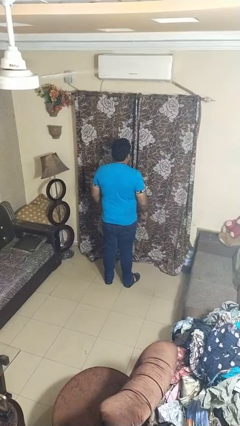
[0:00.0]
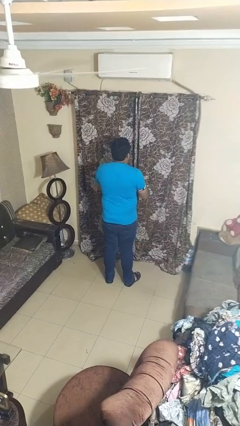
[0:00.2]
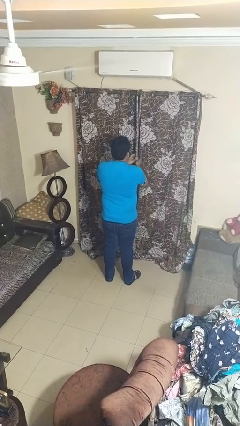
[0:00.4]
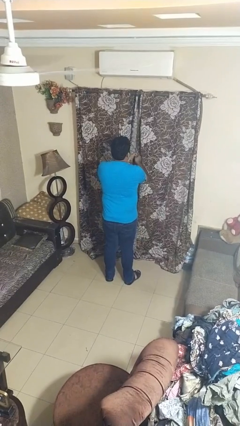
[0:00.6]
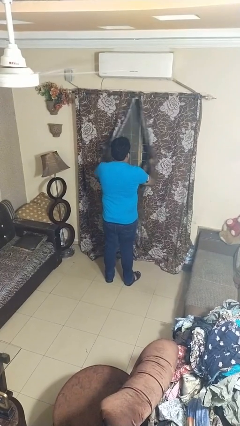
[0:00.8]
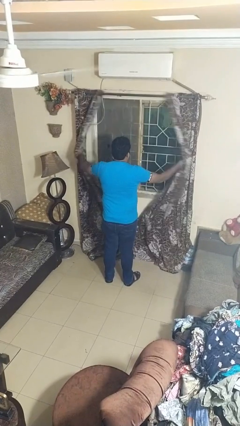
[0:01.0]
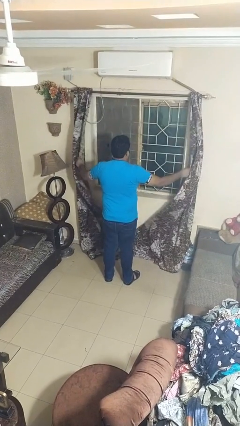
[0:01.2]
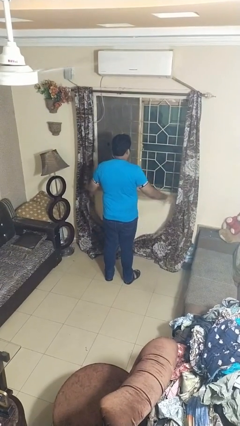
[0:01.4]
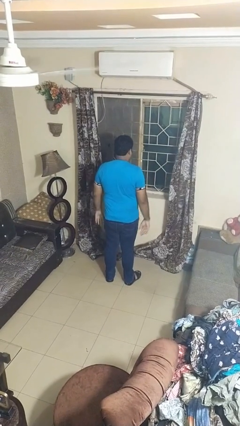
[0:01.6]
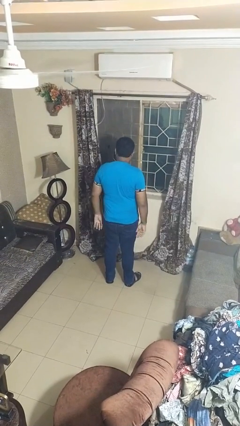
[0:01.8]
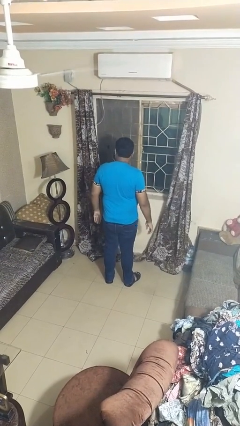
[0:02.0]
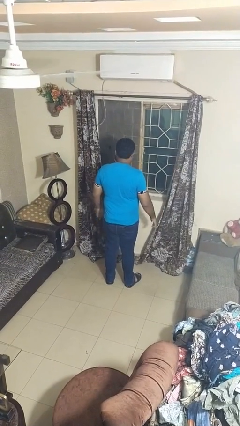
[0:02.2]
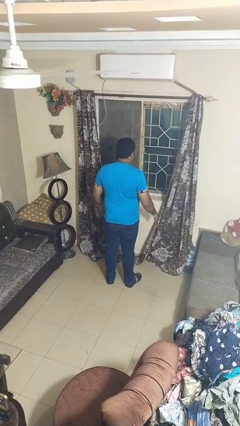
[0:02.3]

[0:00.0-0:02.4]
person opens curtains

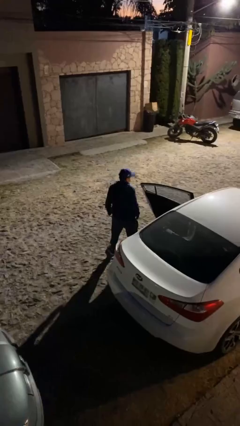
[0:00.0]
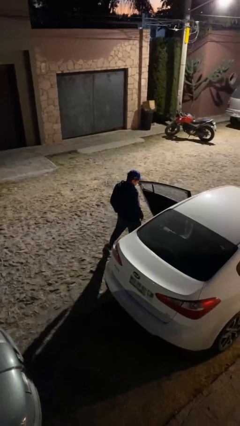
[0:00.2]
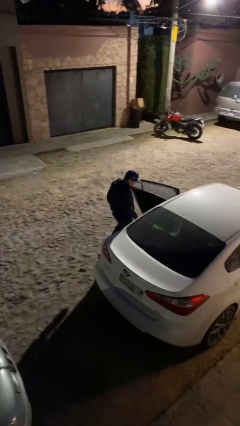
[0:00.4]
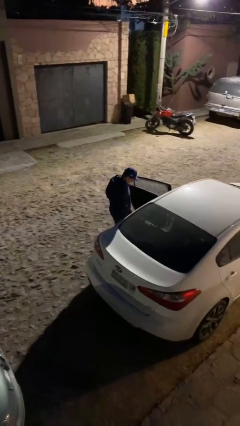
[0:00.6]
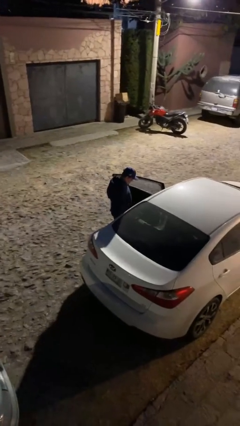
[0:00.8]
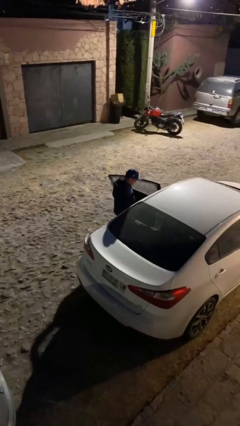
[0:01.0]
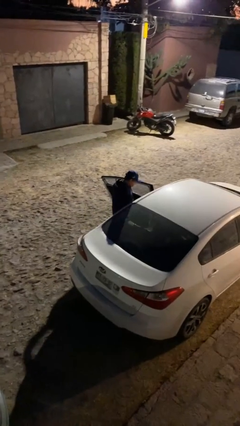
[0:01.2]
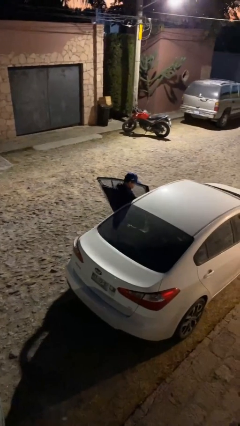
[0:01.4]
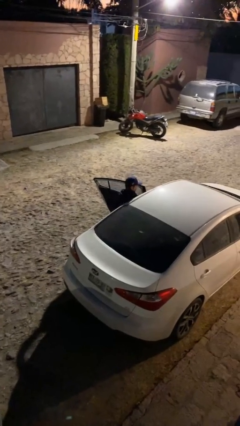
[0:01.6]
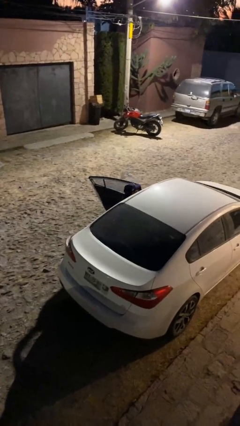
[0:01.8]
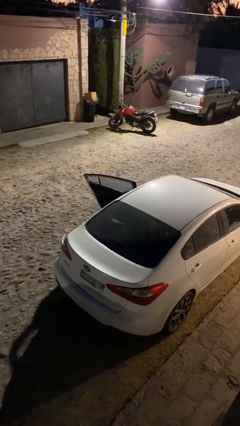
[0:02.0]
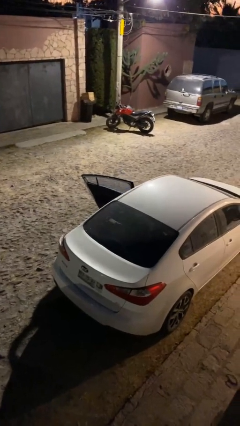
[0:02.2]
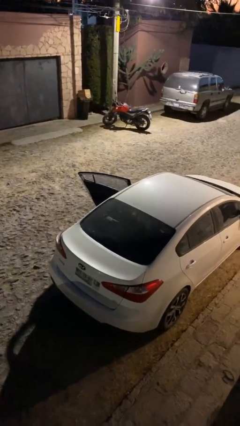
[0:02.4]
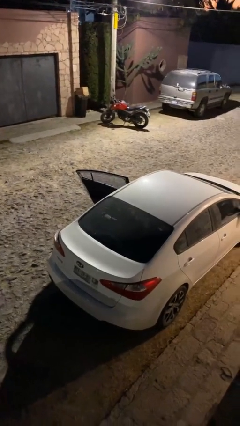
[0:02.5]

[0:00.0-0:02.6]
person enters car

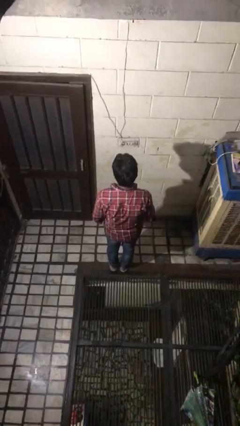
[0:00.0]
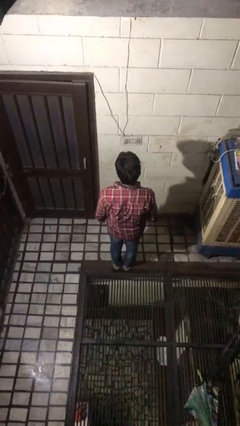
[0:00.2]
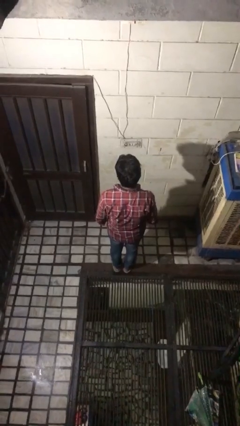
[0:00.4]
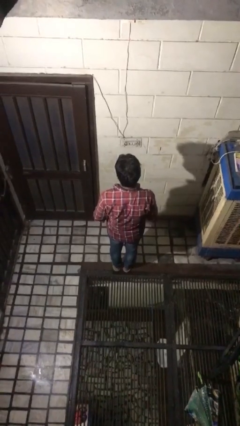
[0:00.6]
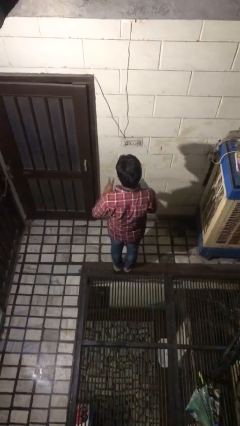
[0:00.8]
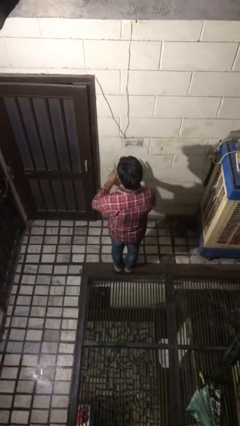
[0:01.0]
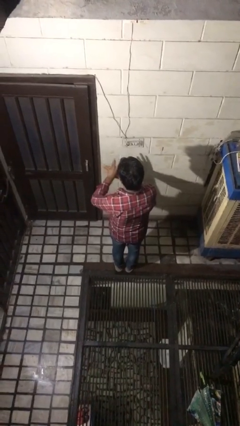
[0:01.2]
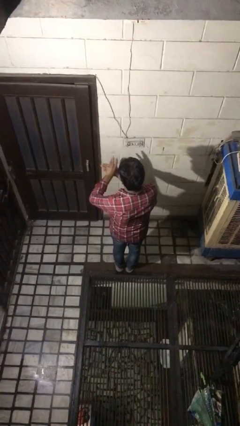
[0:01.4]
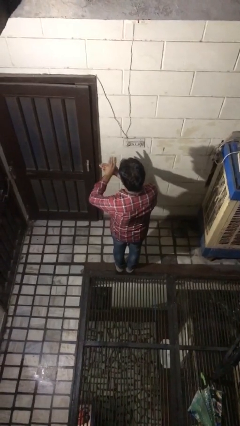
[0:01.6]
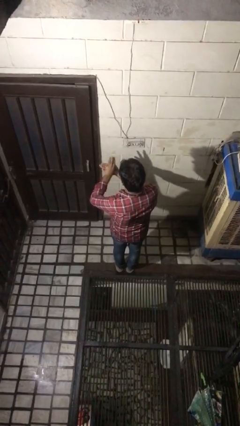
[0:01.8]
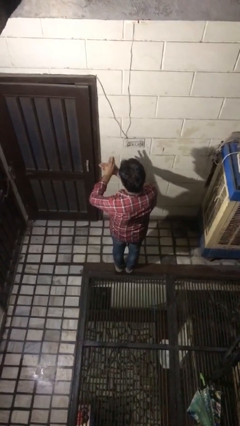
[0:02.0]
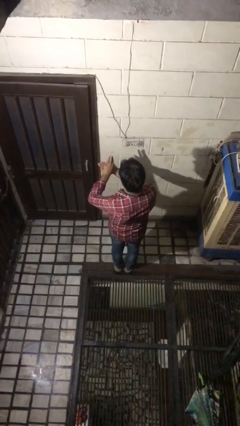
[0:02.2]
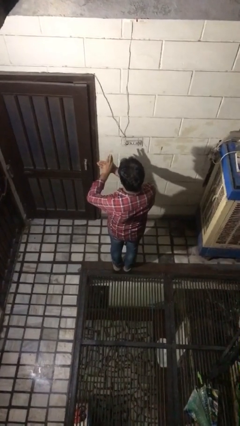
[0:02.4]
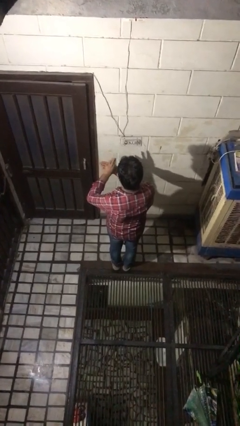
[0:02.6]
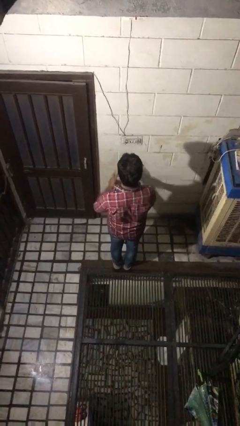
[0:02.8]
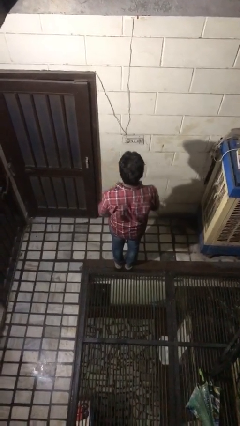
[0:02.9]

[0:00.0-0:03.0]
person gestures number three
